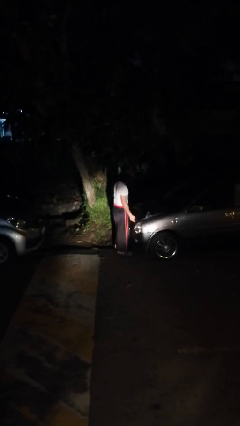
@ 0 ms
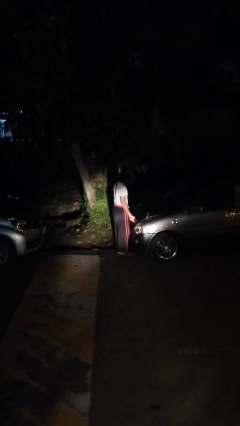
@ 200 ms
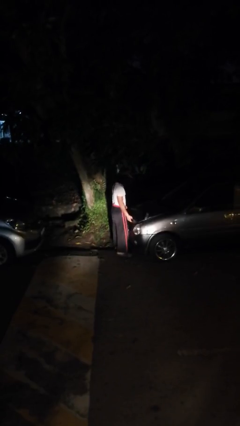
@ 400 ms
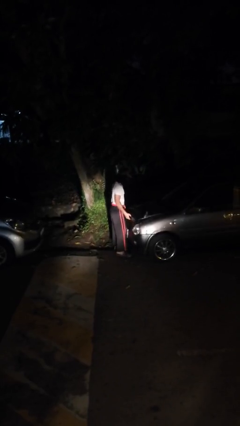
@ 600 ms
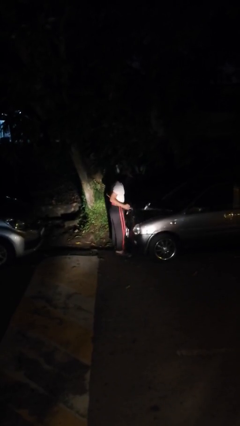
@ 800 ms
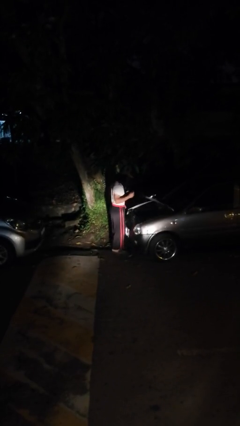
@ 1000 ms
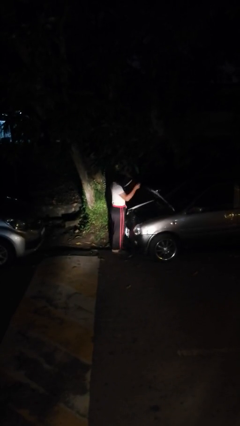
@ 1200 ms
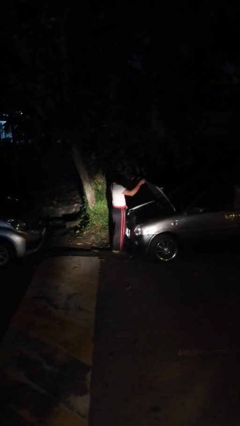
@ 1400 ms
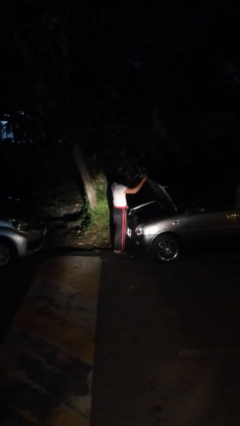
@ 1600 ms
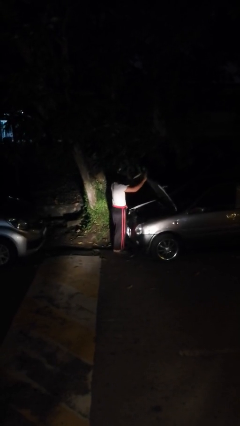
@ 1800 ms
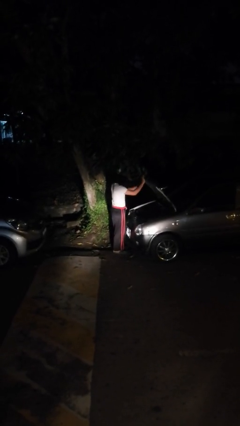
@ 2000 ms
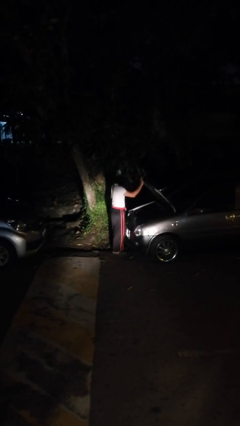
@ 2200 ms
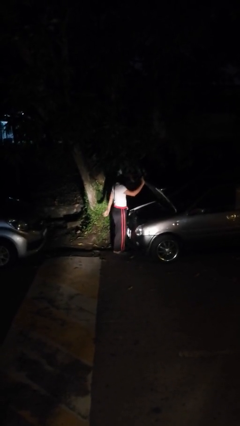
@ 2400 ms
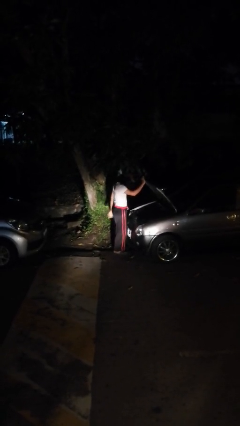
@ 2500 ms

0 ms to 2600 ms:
person opens car hood

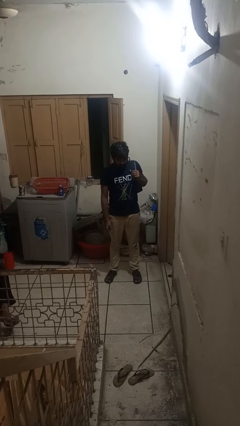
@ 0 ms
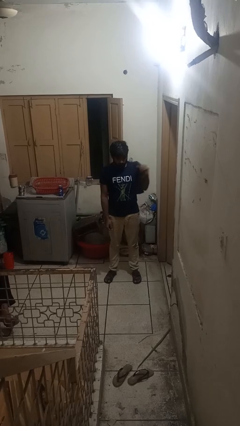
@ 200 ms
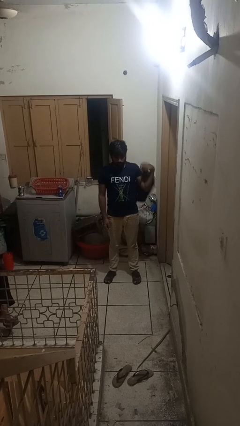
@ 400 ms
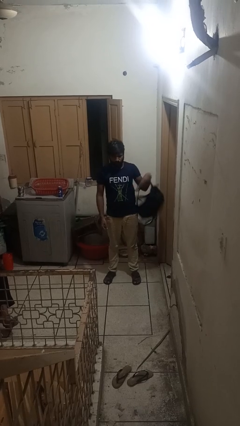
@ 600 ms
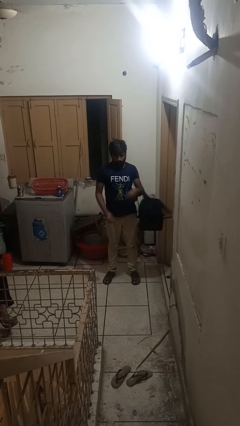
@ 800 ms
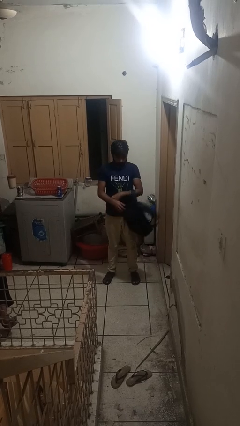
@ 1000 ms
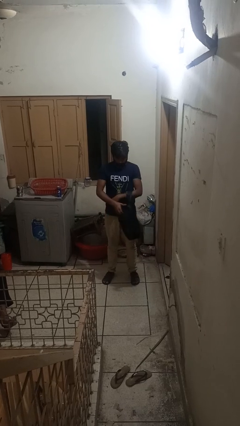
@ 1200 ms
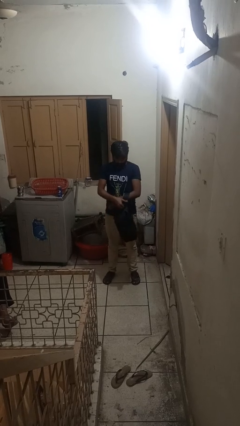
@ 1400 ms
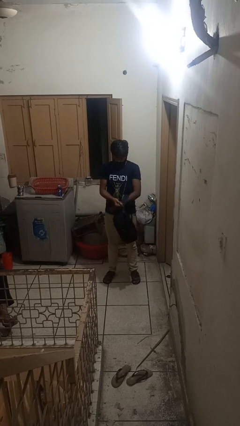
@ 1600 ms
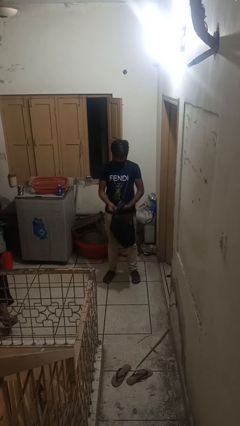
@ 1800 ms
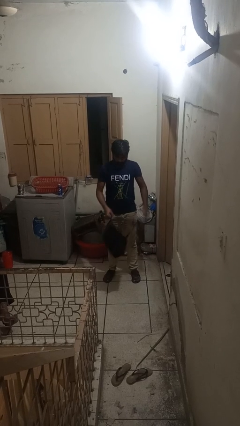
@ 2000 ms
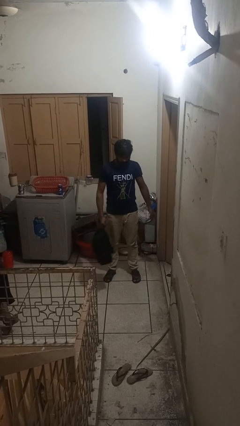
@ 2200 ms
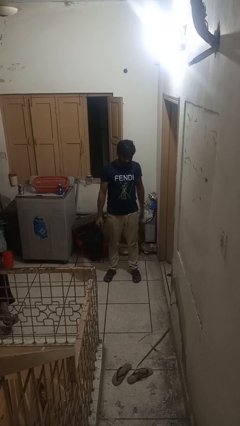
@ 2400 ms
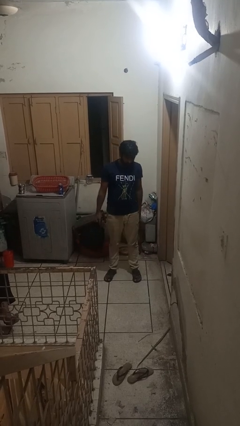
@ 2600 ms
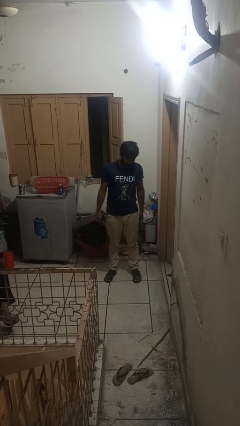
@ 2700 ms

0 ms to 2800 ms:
person takes off backpack

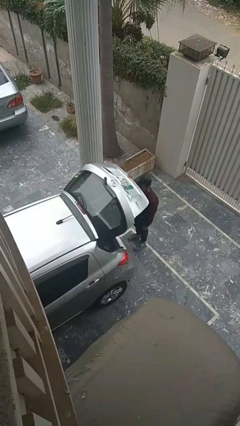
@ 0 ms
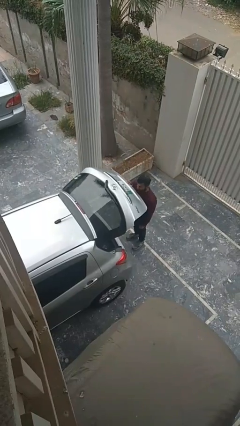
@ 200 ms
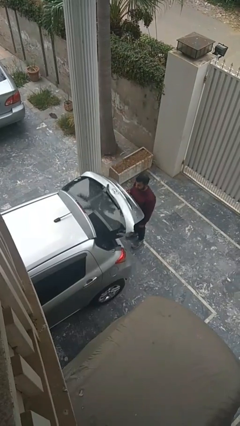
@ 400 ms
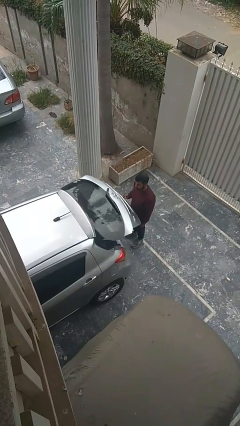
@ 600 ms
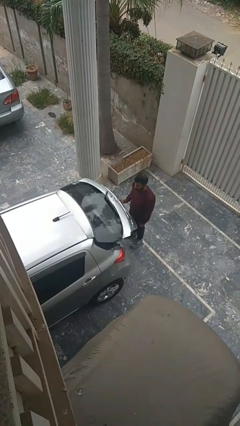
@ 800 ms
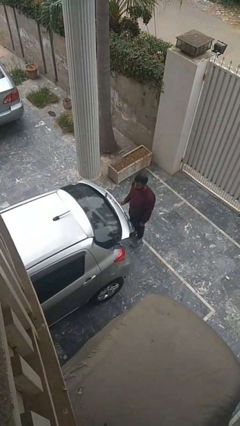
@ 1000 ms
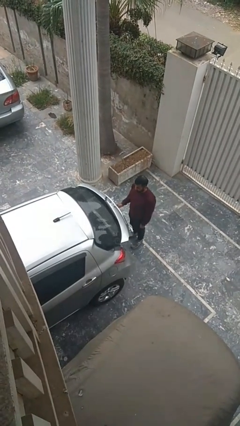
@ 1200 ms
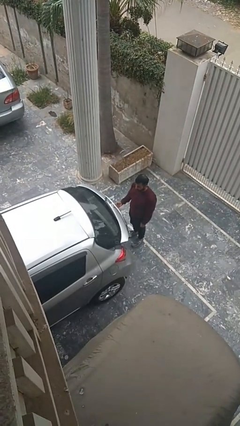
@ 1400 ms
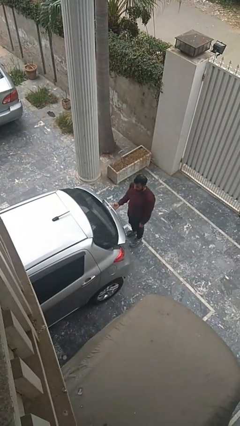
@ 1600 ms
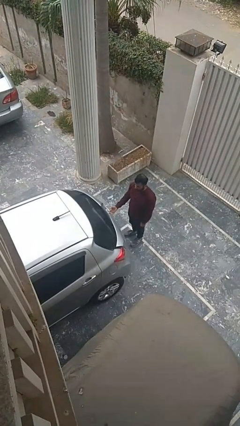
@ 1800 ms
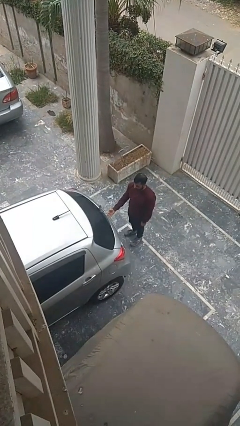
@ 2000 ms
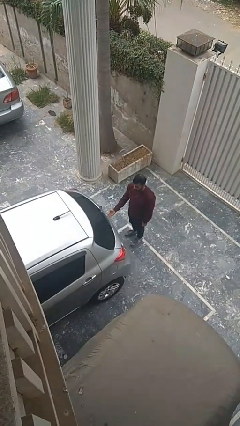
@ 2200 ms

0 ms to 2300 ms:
person closes car trunk

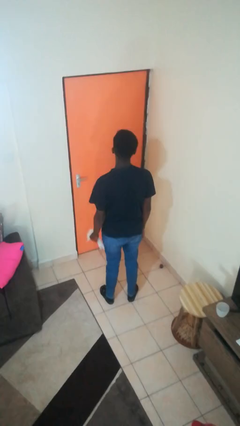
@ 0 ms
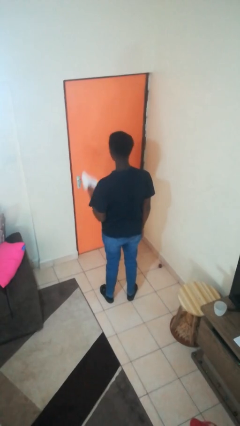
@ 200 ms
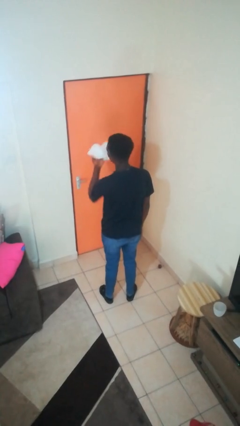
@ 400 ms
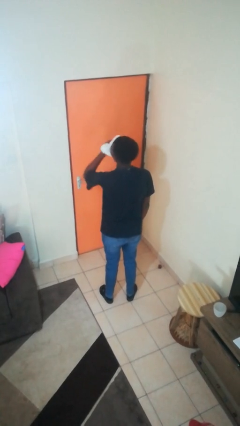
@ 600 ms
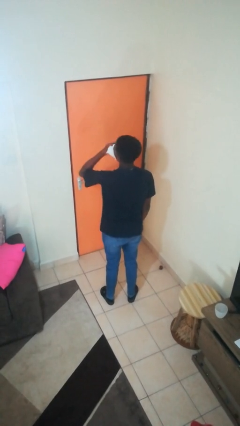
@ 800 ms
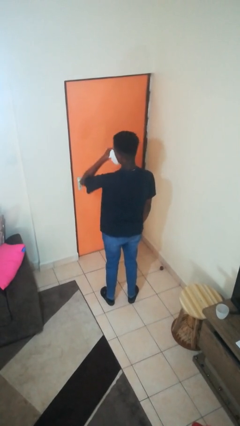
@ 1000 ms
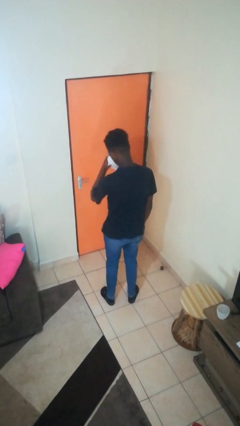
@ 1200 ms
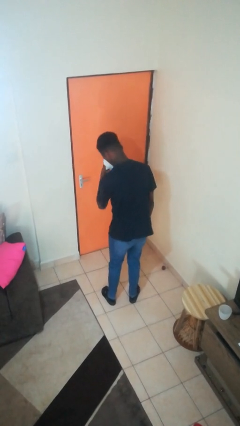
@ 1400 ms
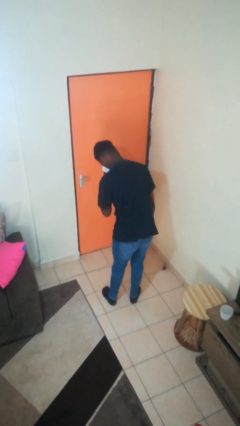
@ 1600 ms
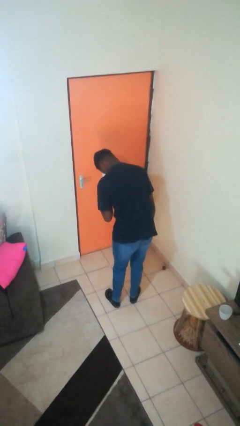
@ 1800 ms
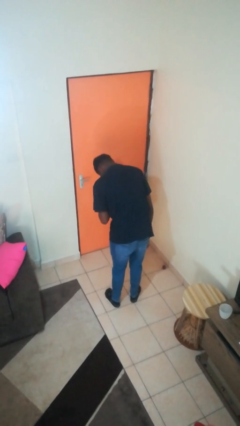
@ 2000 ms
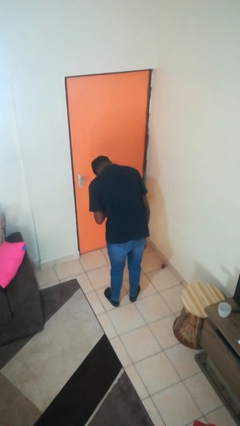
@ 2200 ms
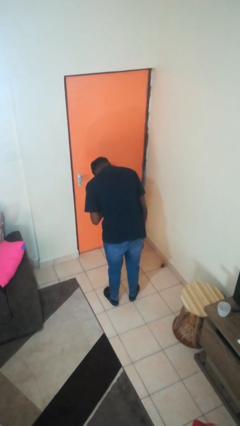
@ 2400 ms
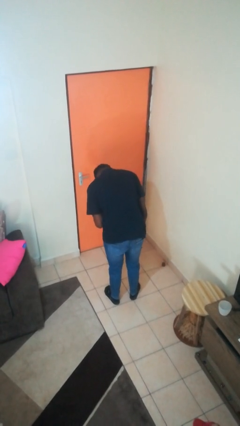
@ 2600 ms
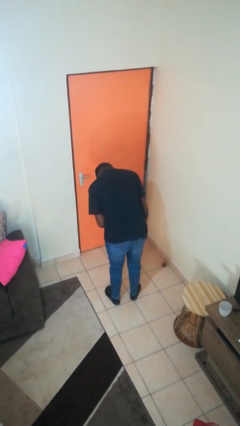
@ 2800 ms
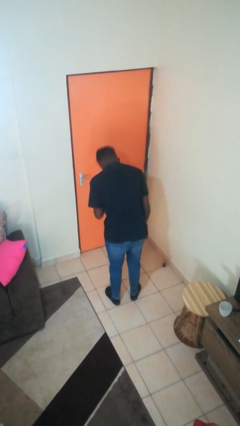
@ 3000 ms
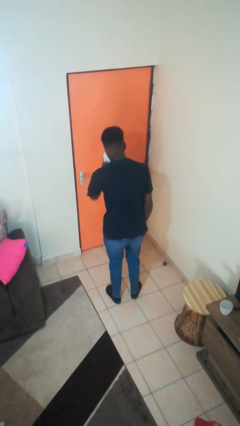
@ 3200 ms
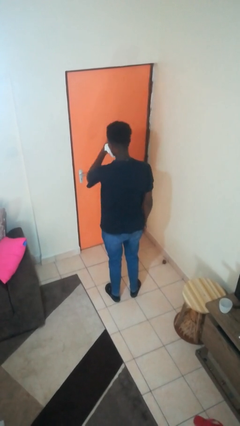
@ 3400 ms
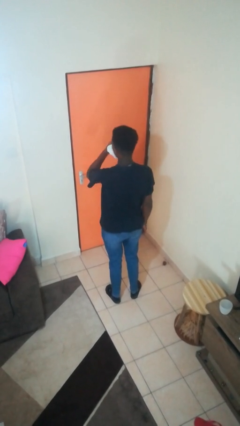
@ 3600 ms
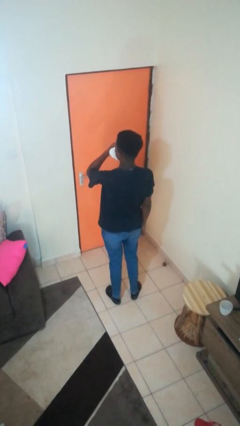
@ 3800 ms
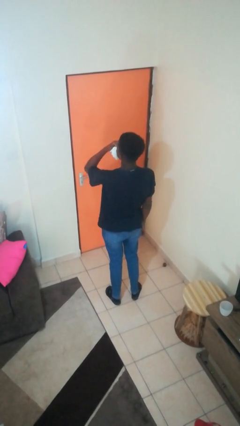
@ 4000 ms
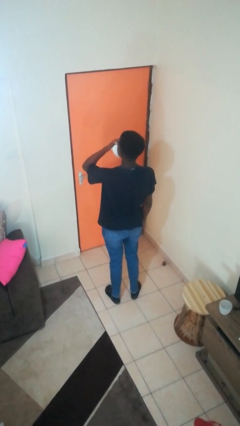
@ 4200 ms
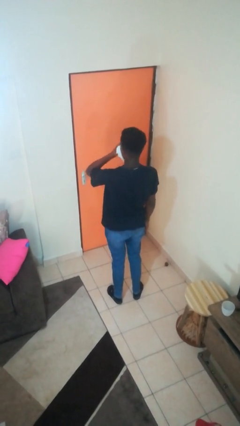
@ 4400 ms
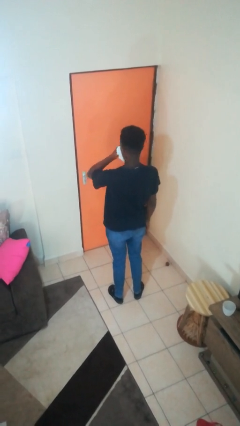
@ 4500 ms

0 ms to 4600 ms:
person blows nose

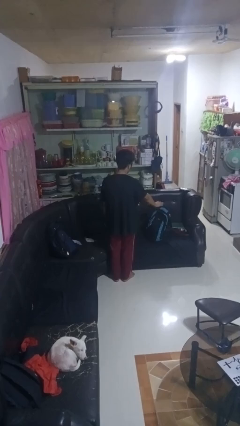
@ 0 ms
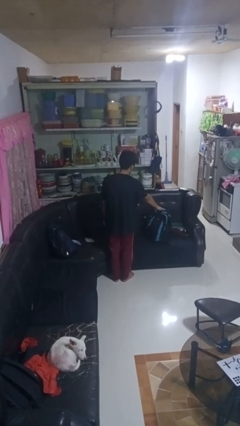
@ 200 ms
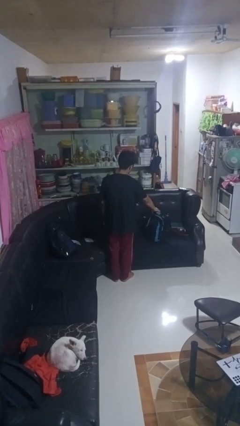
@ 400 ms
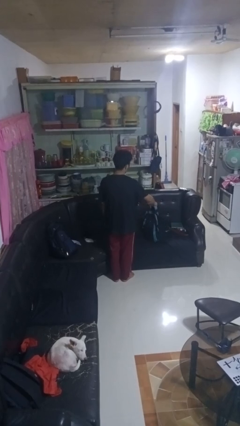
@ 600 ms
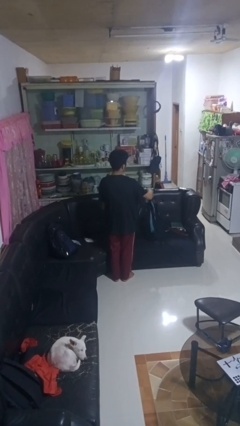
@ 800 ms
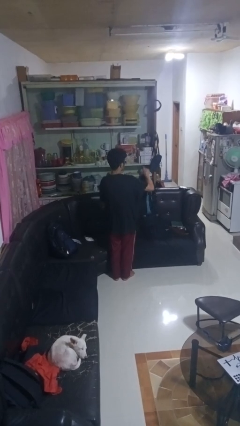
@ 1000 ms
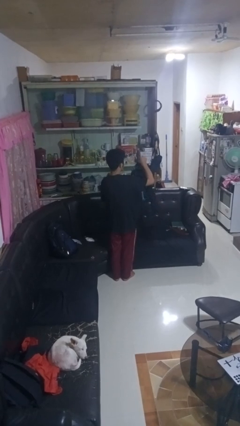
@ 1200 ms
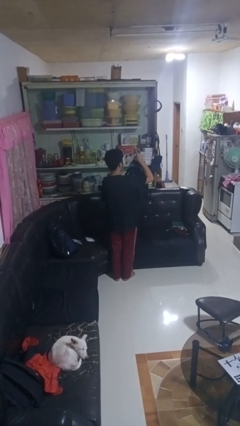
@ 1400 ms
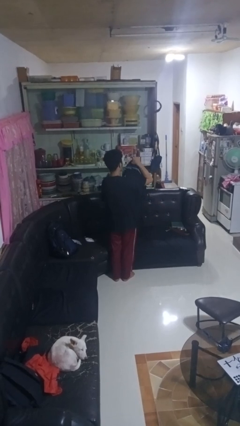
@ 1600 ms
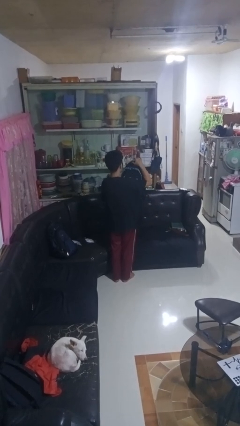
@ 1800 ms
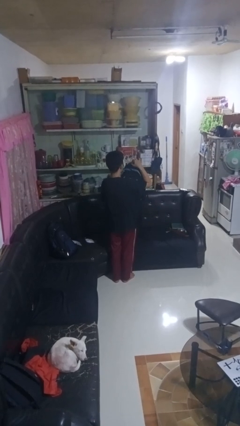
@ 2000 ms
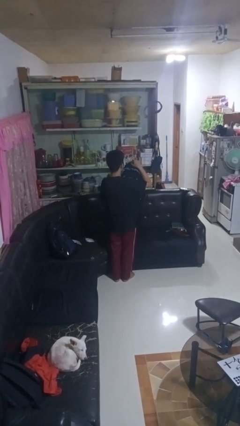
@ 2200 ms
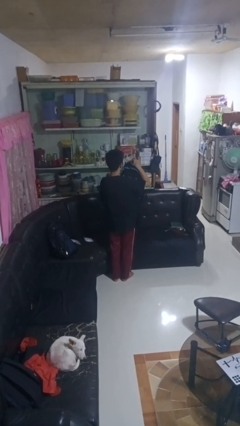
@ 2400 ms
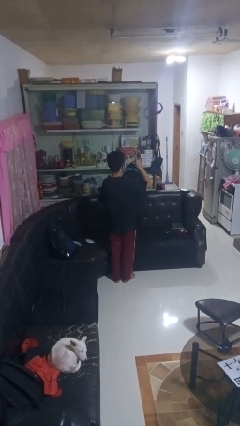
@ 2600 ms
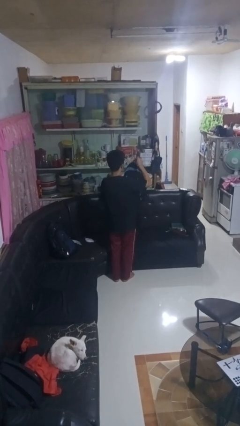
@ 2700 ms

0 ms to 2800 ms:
person picks up object from couch

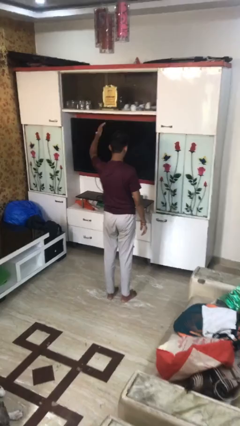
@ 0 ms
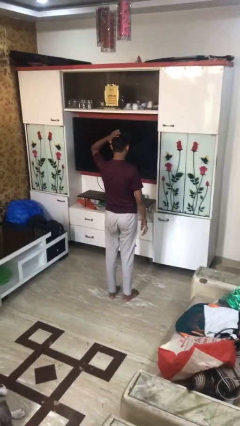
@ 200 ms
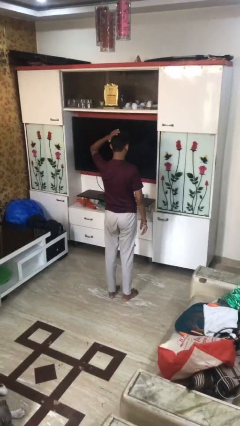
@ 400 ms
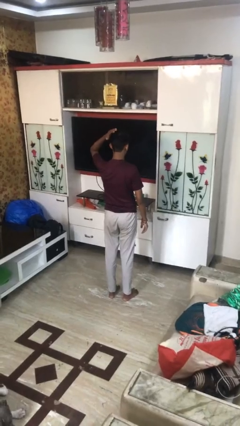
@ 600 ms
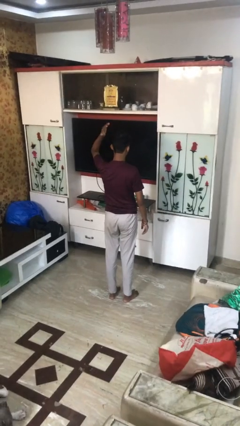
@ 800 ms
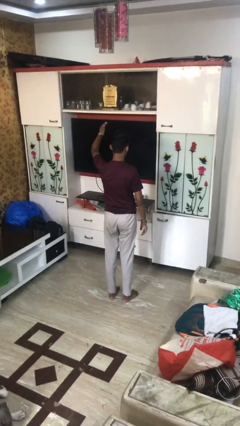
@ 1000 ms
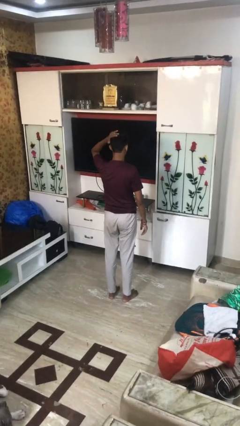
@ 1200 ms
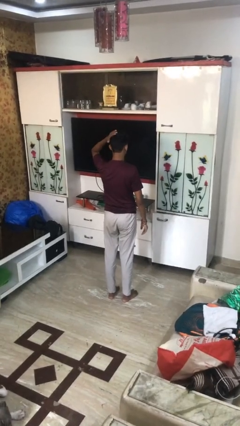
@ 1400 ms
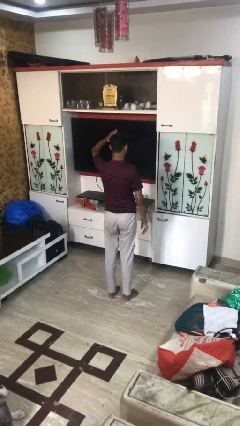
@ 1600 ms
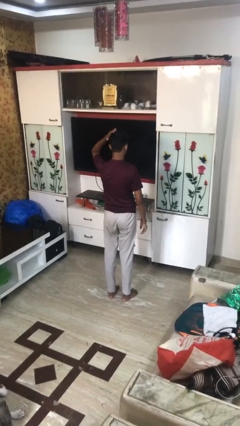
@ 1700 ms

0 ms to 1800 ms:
person pats head

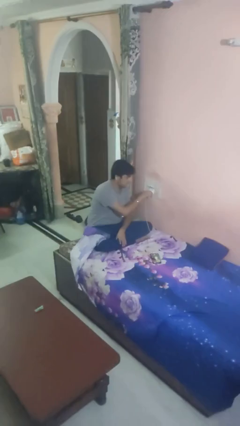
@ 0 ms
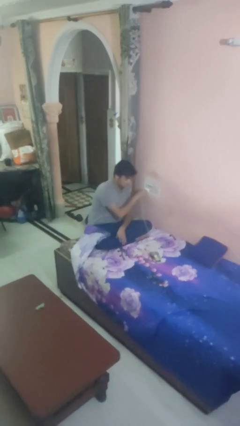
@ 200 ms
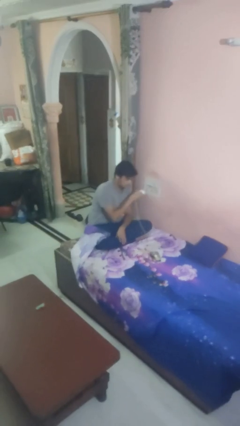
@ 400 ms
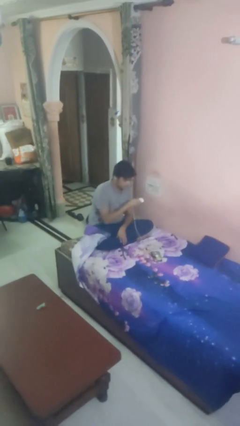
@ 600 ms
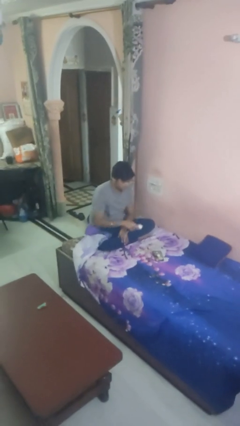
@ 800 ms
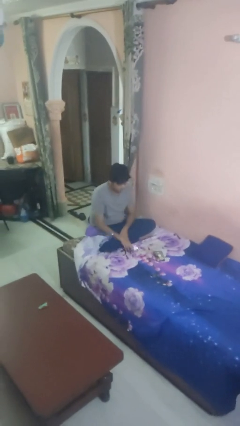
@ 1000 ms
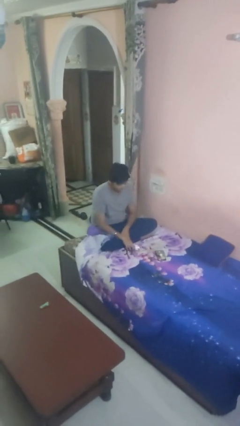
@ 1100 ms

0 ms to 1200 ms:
person unplugs from electrical socket
